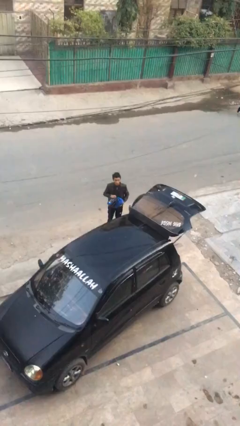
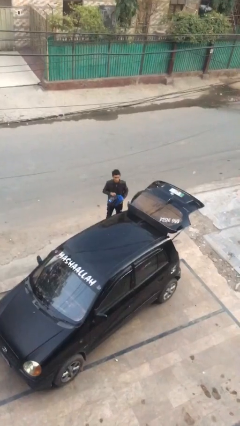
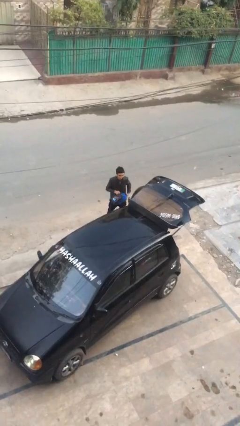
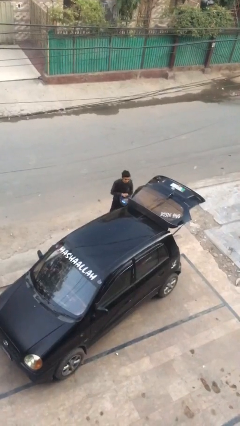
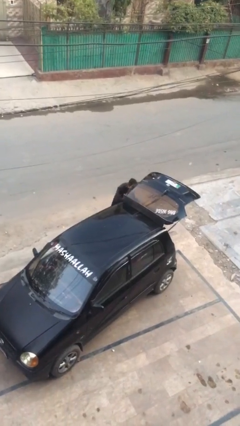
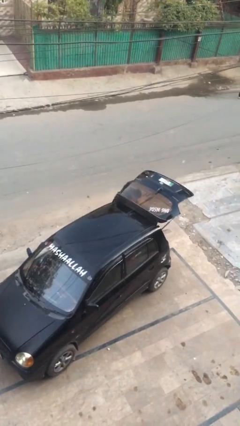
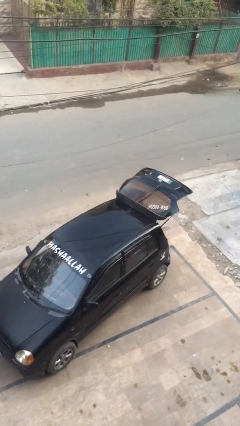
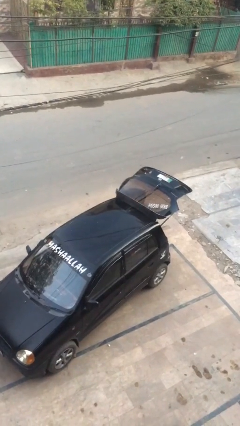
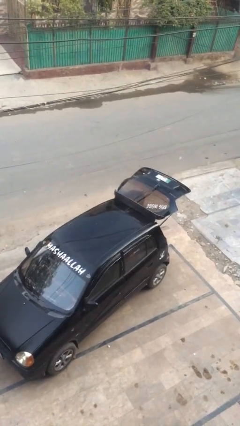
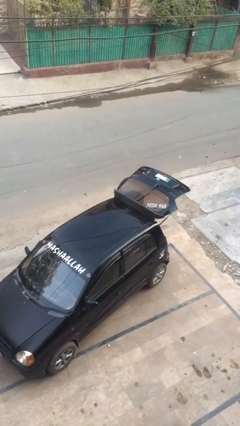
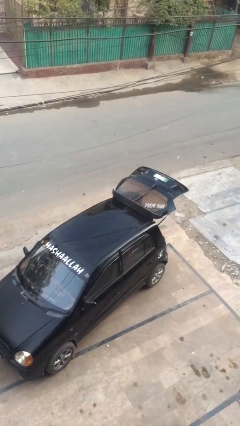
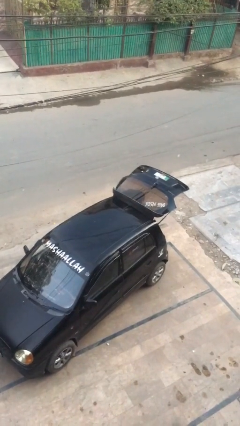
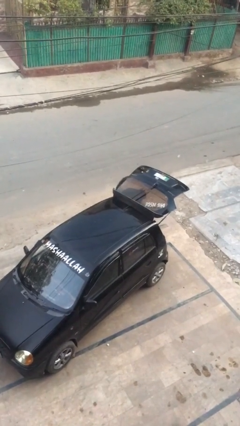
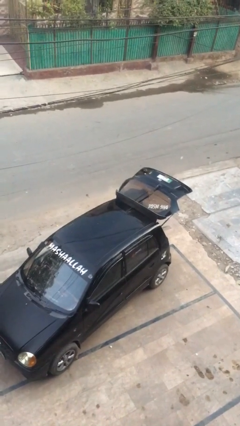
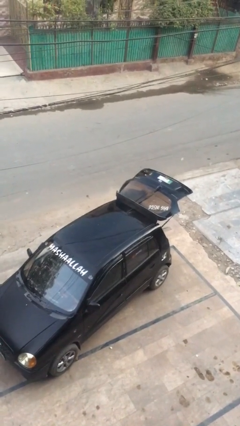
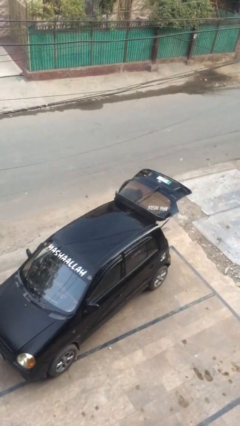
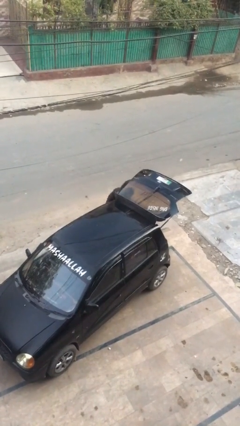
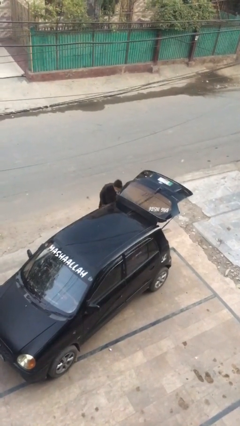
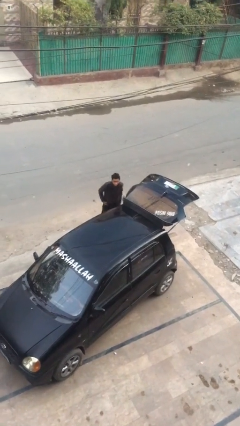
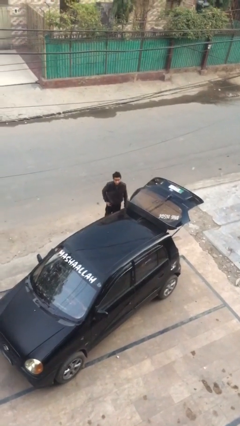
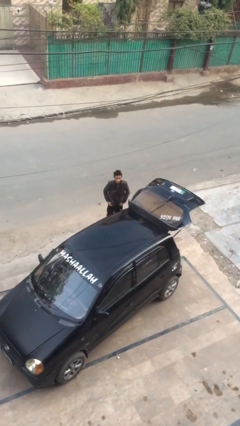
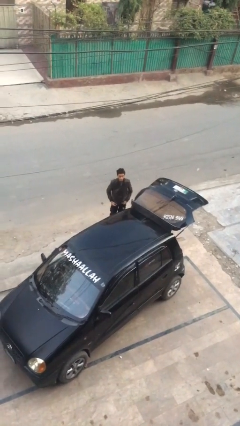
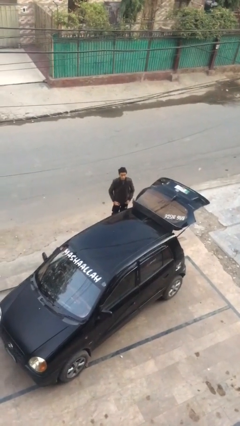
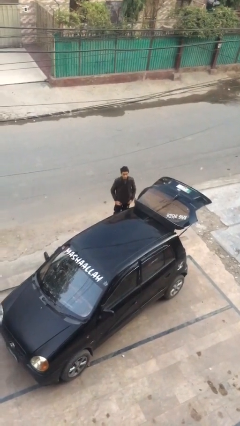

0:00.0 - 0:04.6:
person loads car

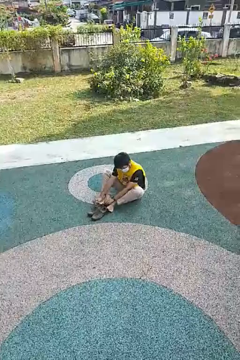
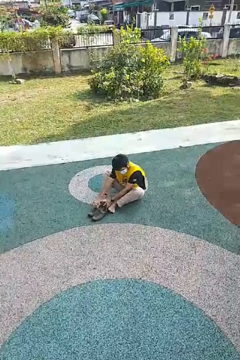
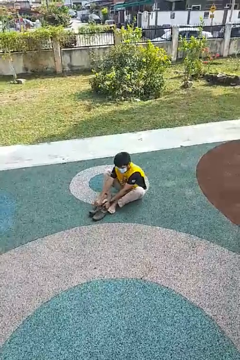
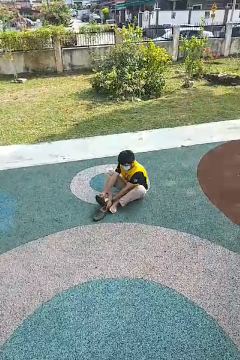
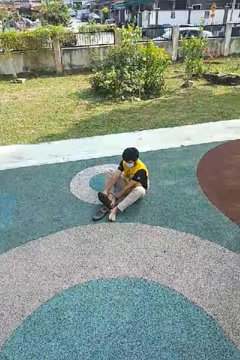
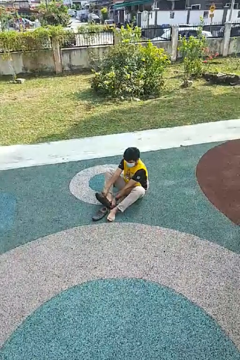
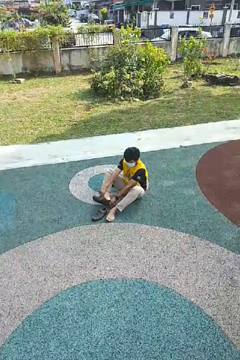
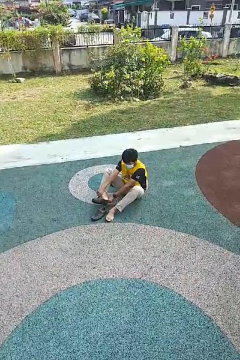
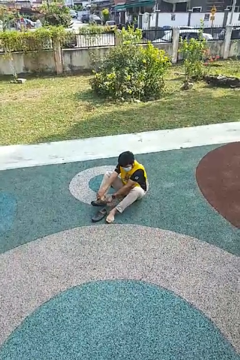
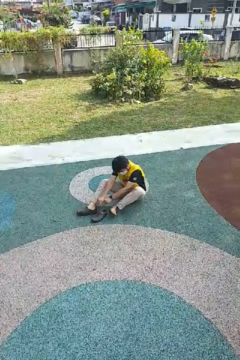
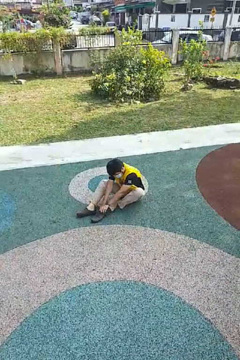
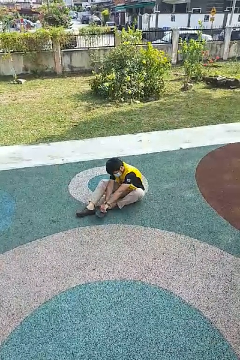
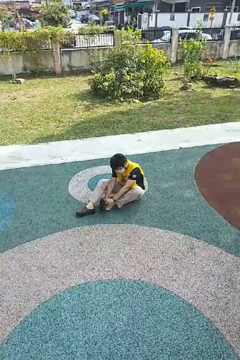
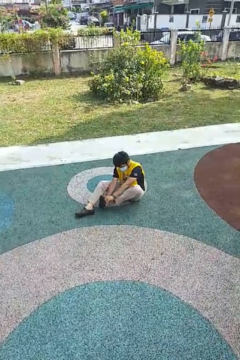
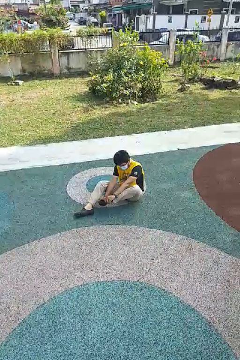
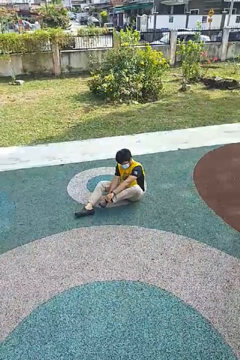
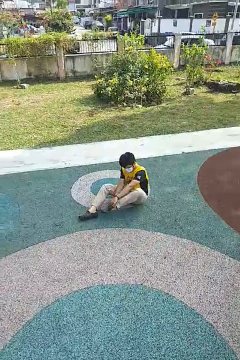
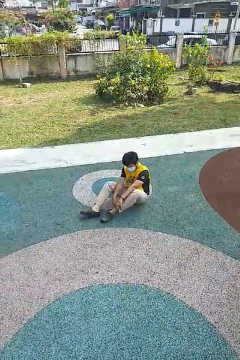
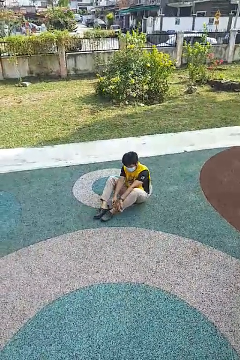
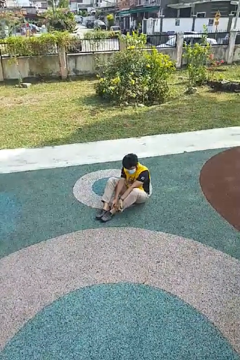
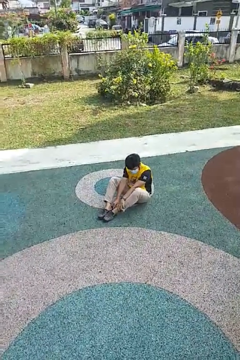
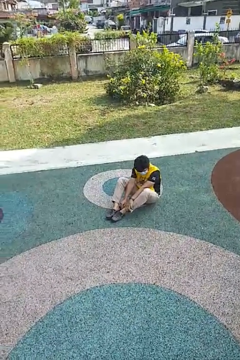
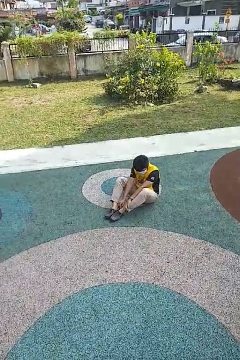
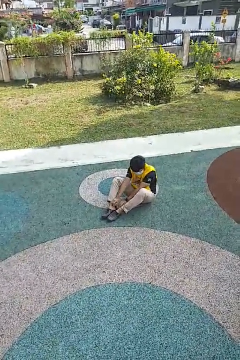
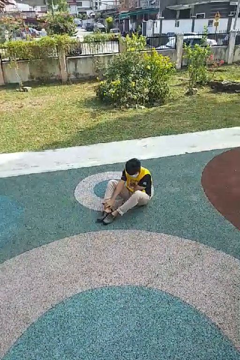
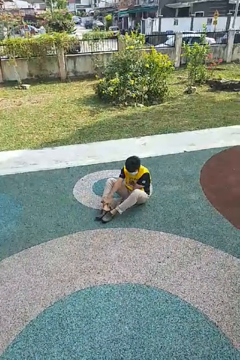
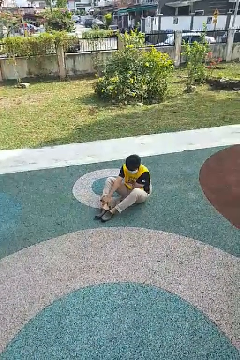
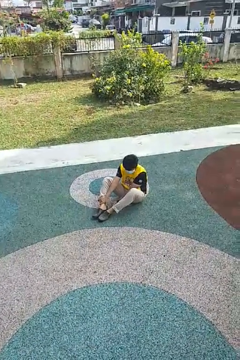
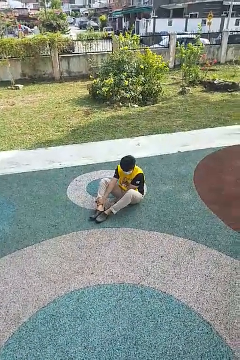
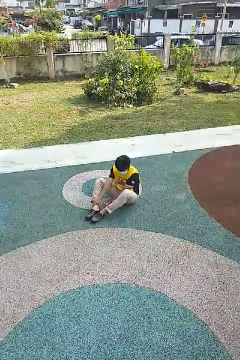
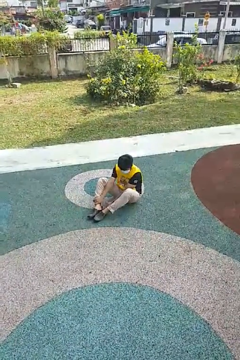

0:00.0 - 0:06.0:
person puts on shoes

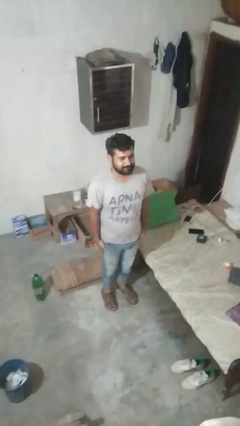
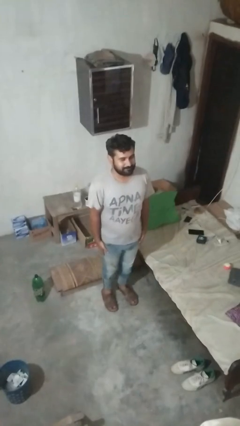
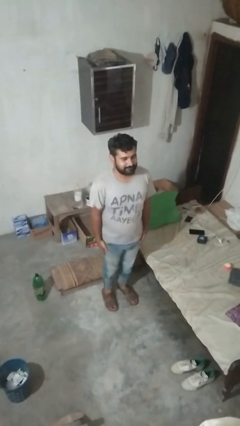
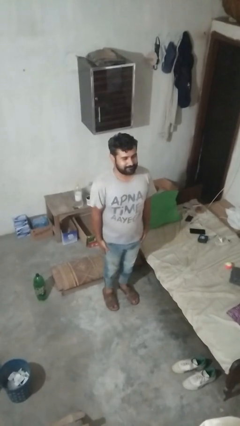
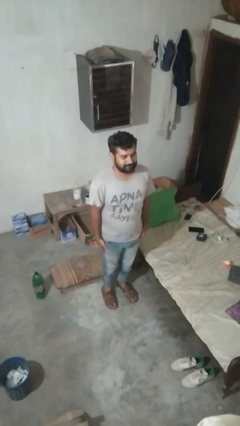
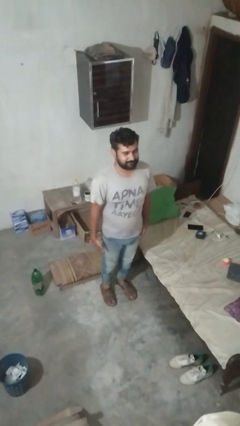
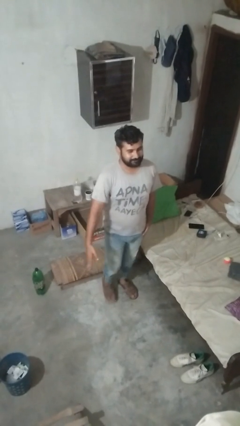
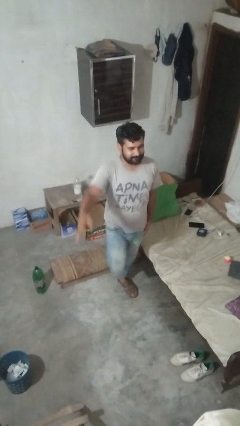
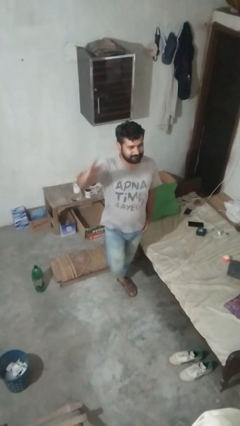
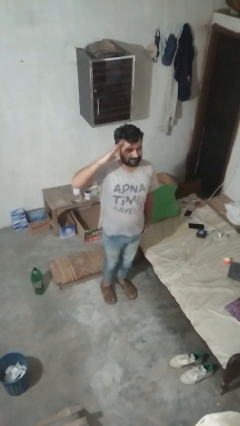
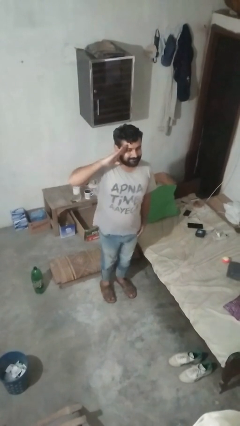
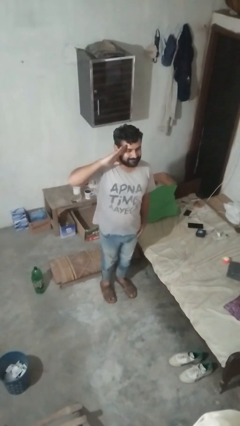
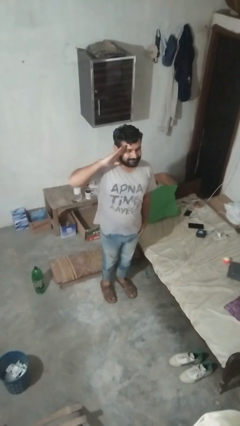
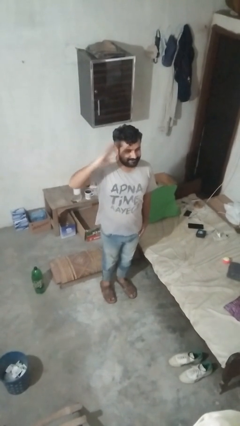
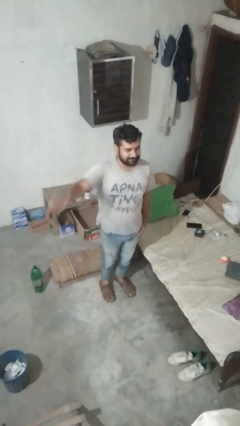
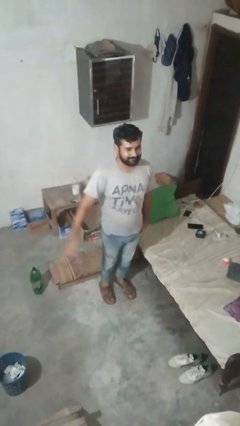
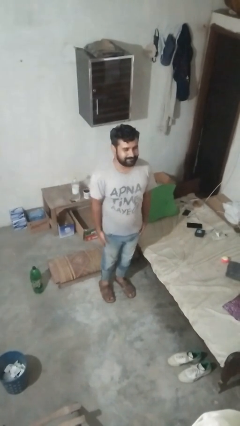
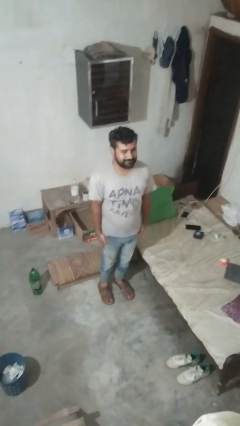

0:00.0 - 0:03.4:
person salutes

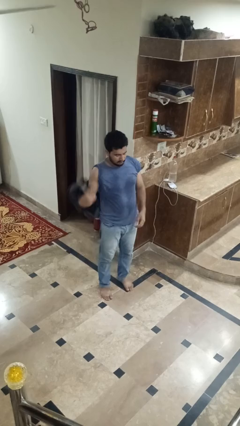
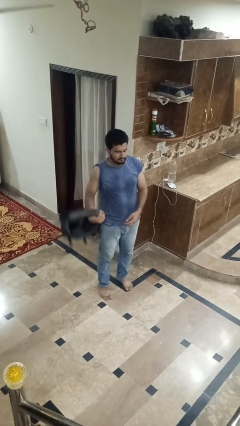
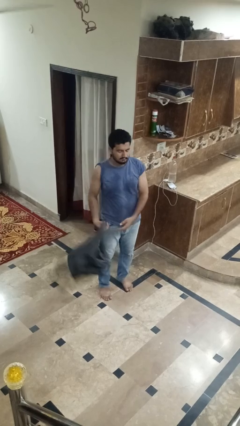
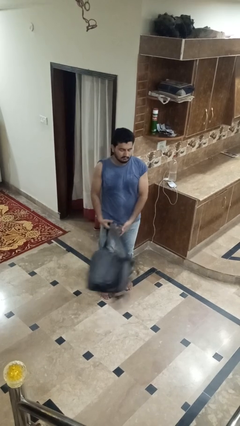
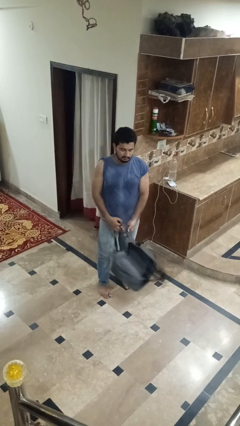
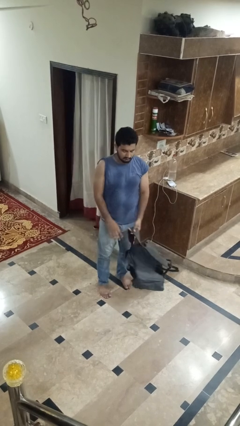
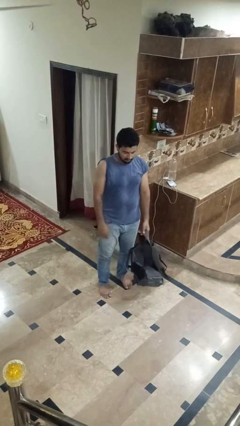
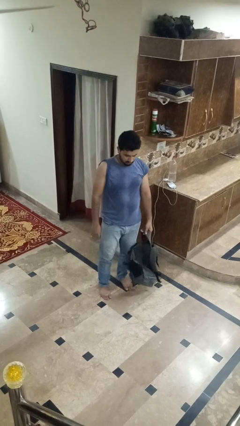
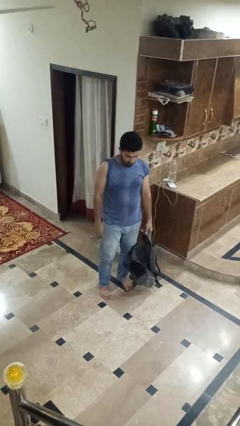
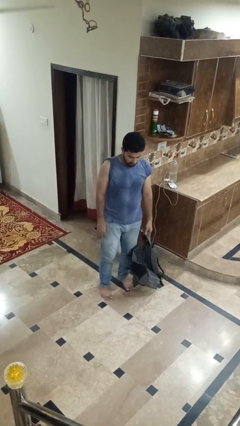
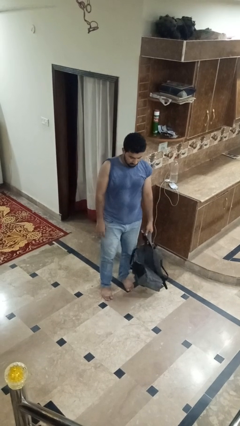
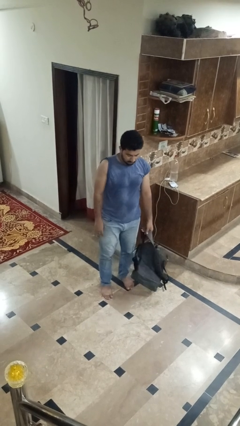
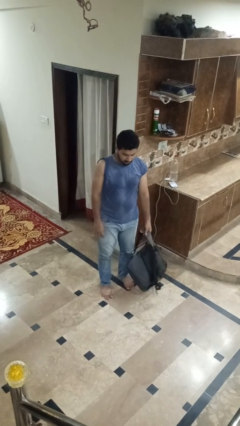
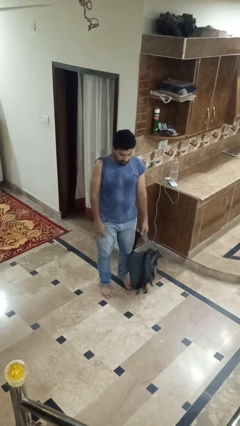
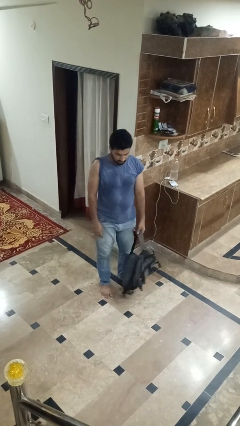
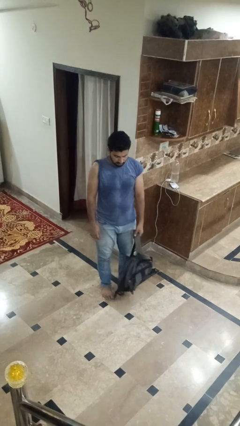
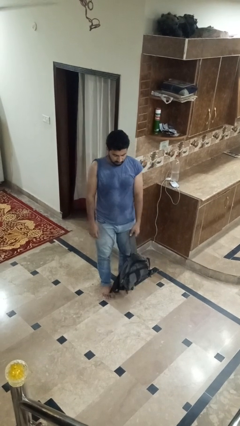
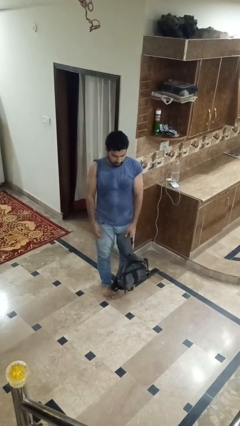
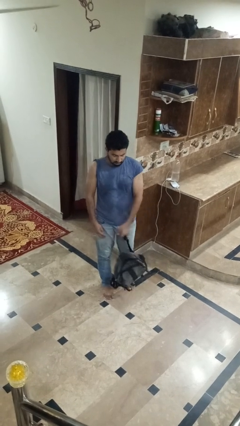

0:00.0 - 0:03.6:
person takes off backpack

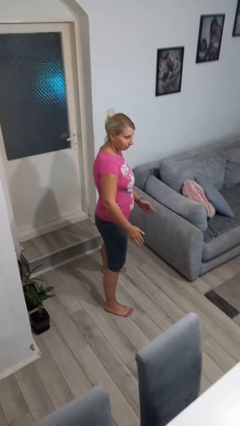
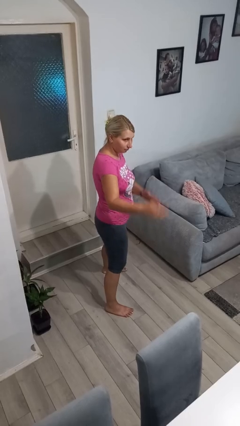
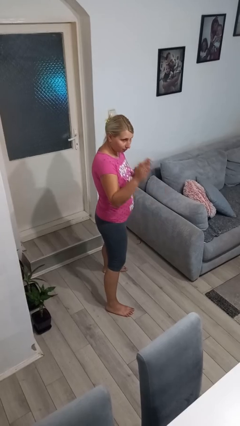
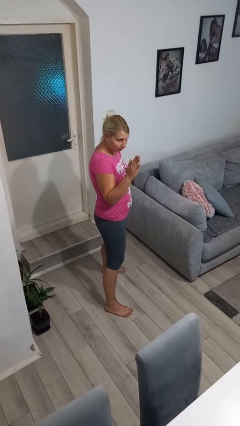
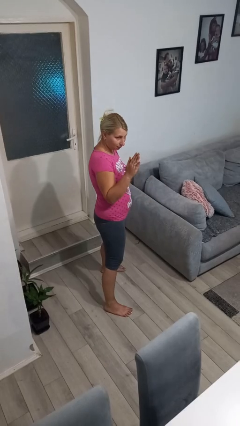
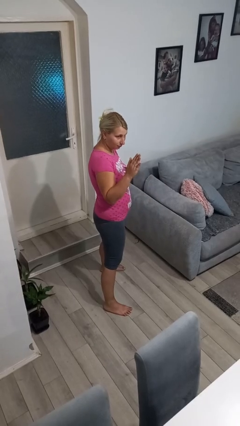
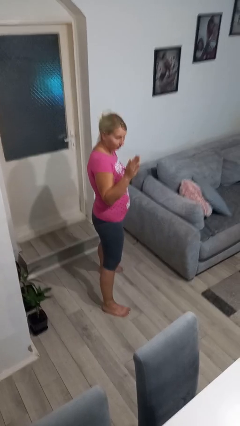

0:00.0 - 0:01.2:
person karate chop
